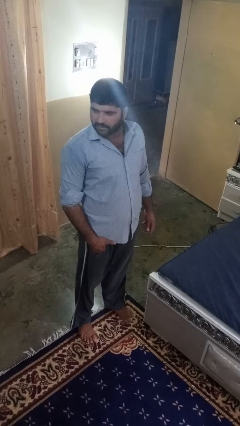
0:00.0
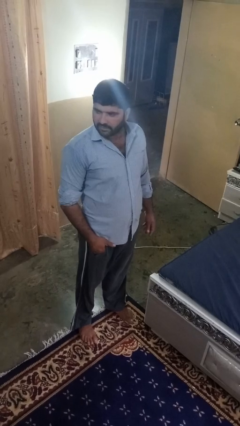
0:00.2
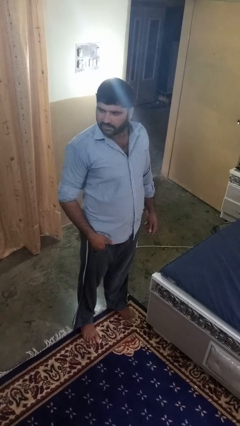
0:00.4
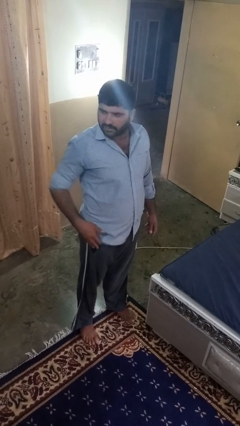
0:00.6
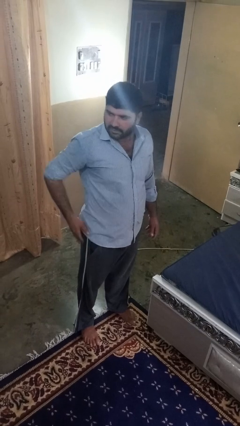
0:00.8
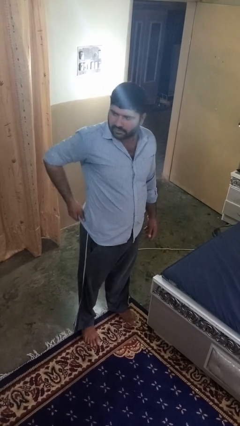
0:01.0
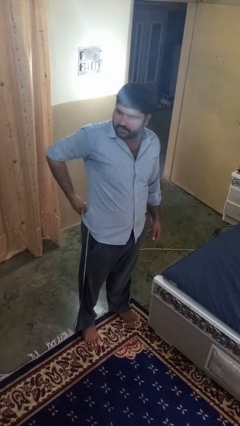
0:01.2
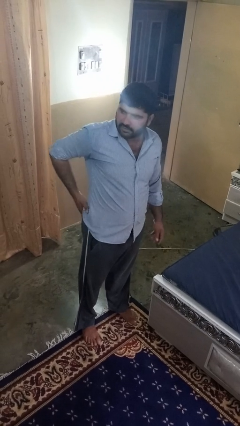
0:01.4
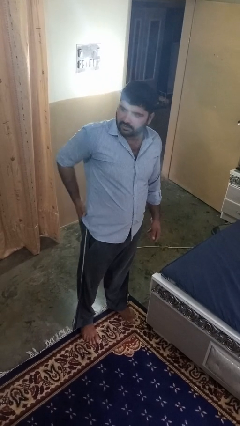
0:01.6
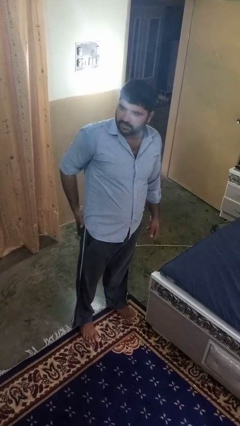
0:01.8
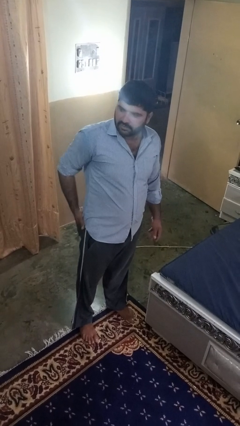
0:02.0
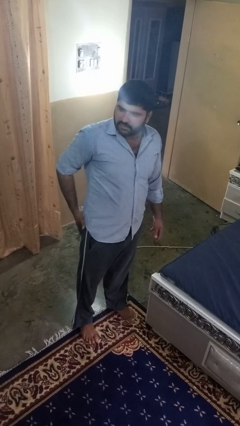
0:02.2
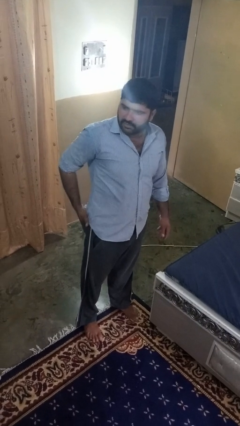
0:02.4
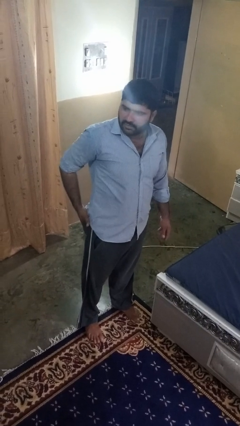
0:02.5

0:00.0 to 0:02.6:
person puts hands in back pockets

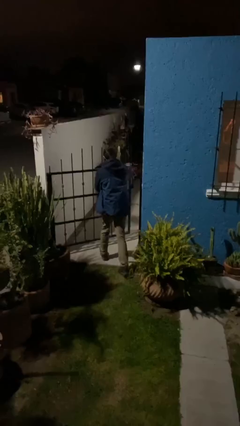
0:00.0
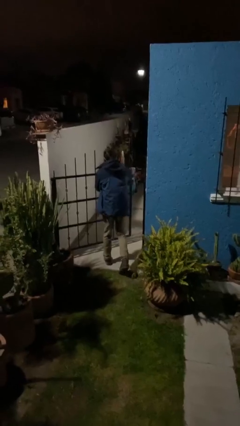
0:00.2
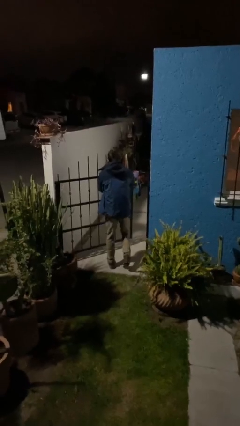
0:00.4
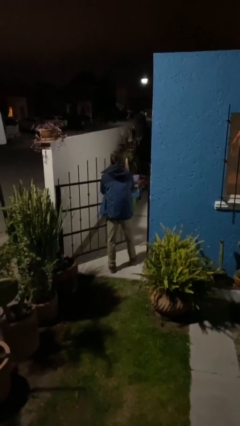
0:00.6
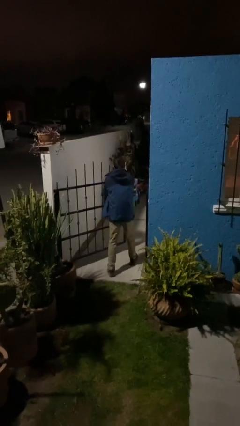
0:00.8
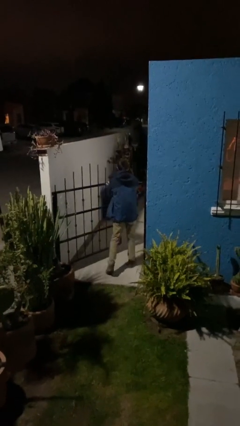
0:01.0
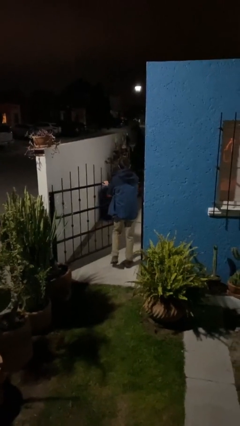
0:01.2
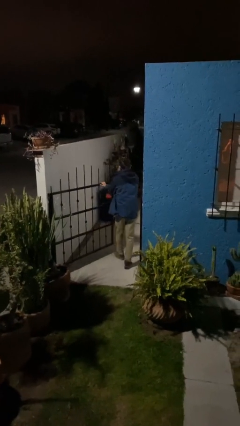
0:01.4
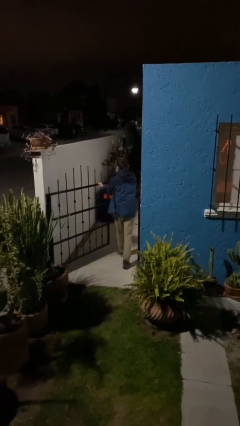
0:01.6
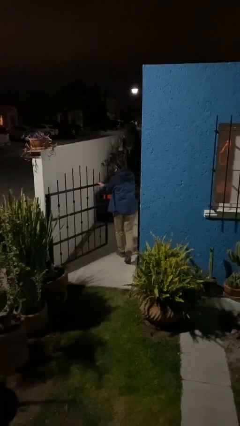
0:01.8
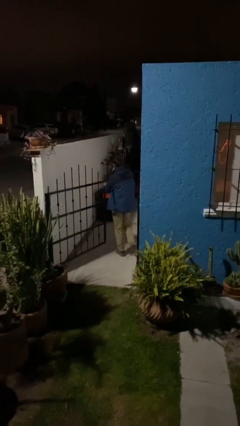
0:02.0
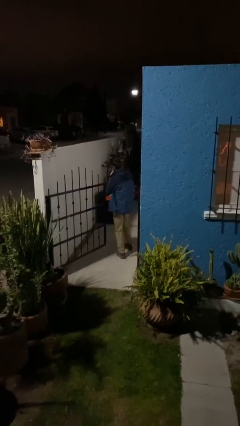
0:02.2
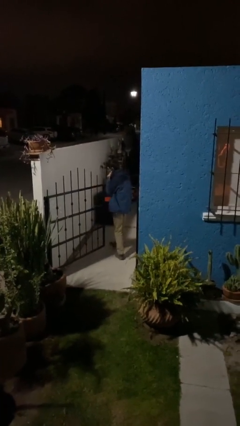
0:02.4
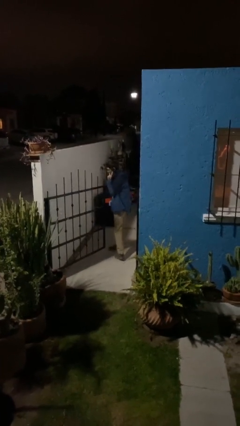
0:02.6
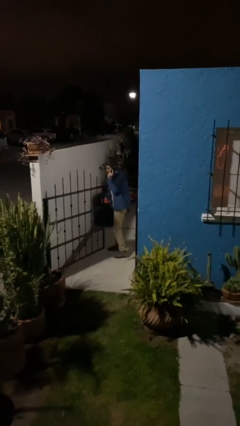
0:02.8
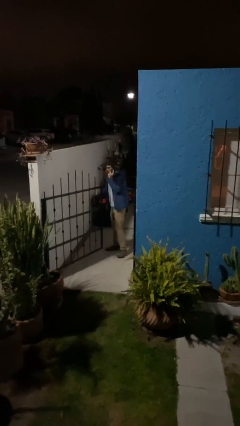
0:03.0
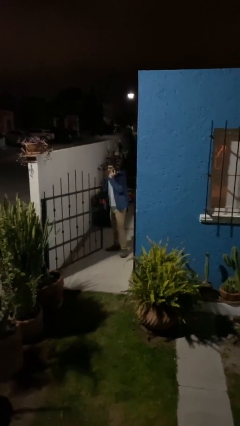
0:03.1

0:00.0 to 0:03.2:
person exits scene through structure

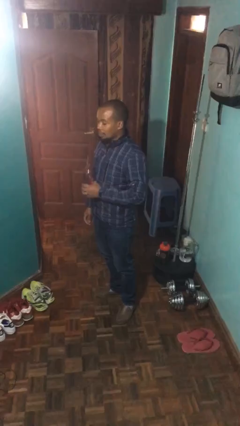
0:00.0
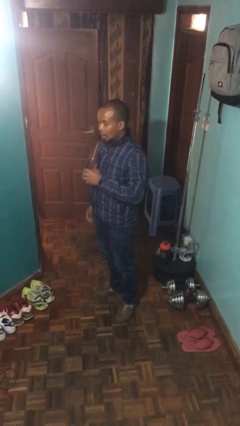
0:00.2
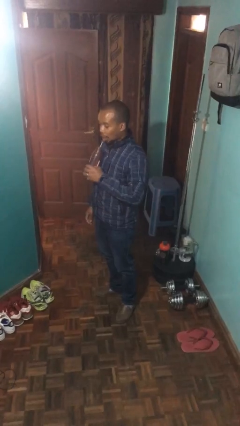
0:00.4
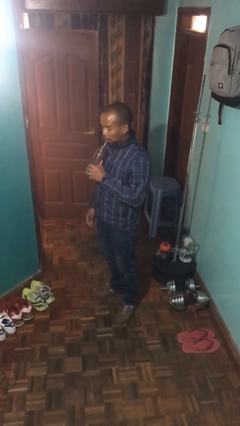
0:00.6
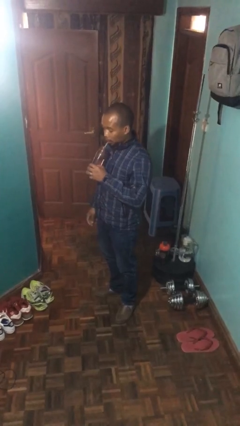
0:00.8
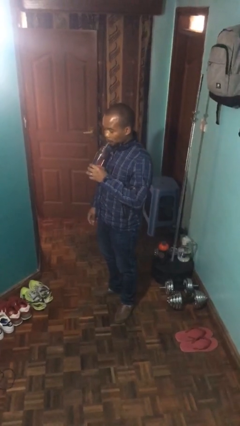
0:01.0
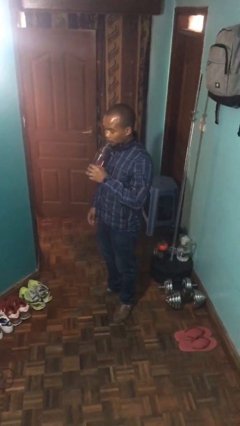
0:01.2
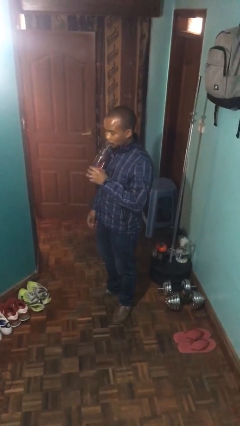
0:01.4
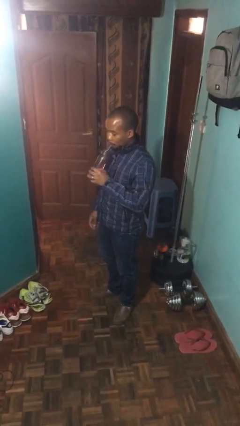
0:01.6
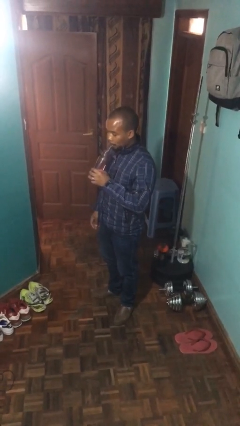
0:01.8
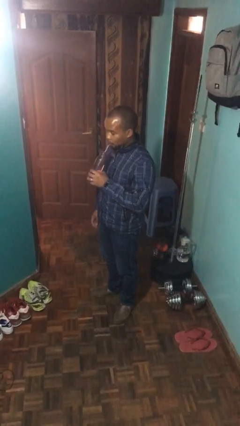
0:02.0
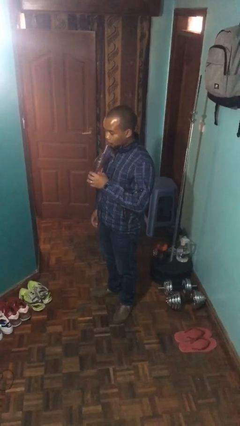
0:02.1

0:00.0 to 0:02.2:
person drinks from straw

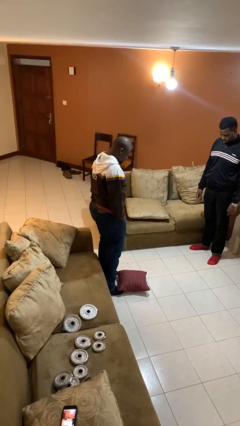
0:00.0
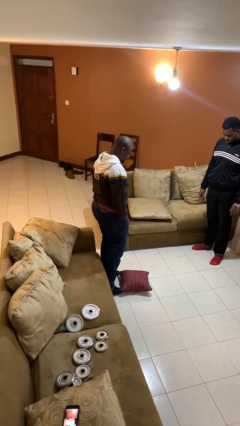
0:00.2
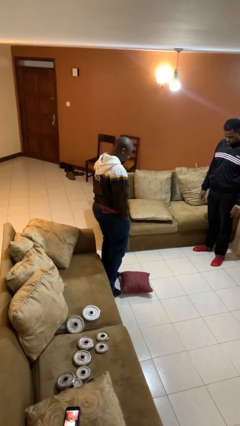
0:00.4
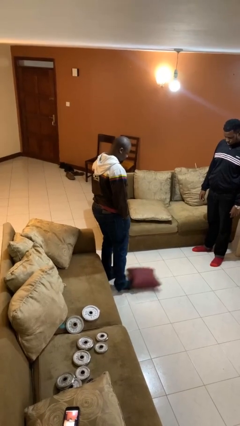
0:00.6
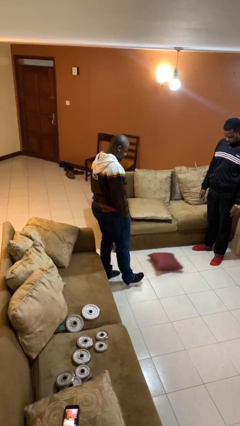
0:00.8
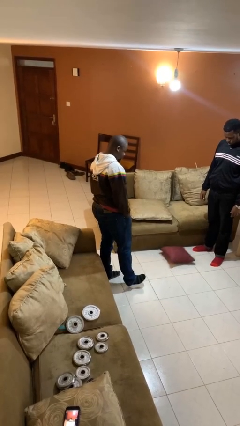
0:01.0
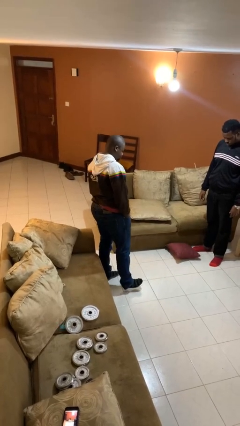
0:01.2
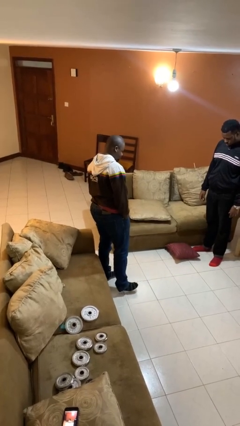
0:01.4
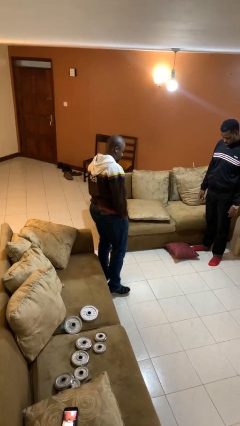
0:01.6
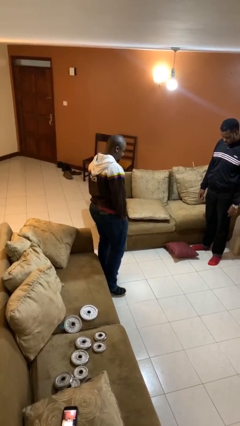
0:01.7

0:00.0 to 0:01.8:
person kicks object to person

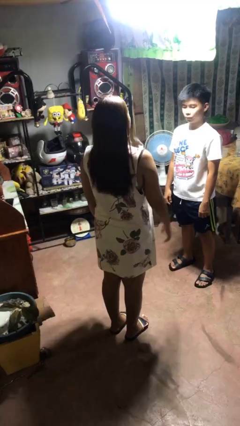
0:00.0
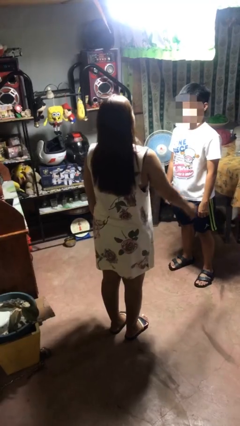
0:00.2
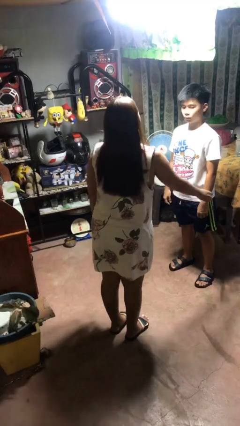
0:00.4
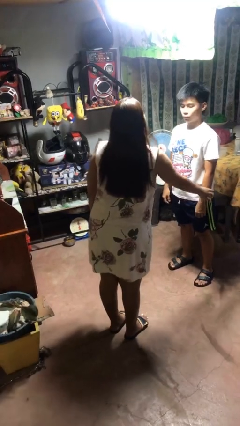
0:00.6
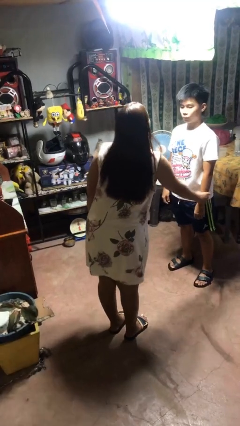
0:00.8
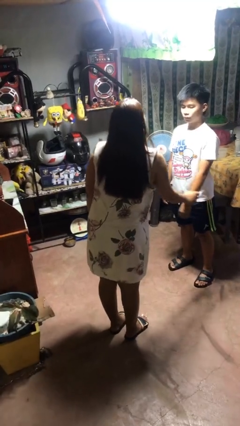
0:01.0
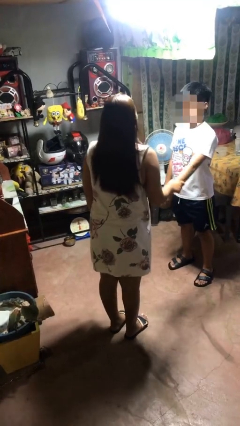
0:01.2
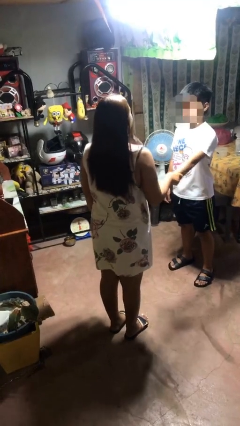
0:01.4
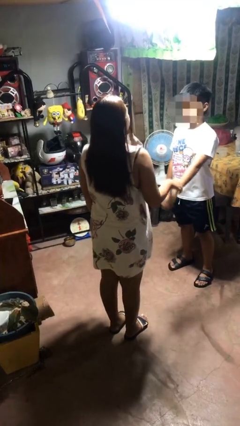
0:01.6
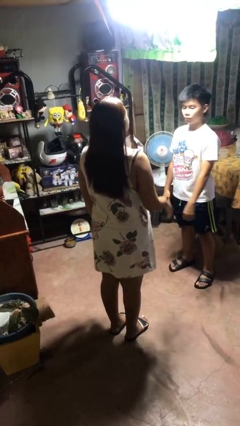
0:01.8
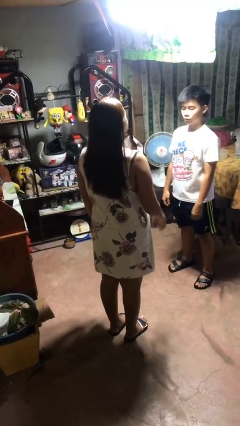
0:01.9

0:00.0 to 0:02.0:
person grabs person by forearm

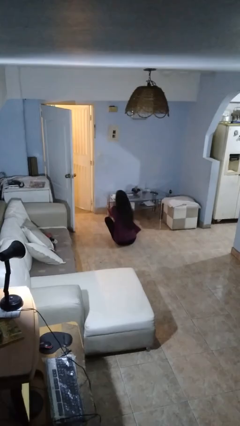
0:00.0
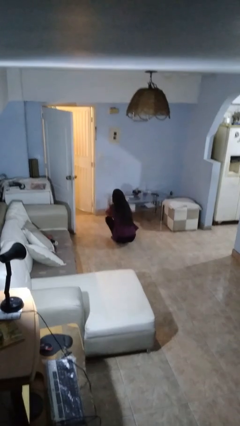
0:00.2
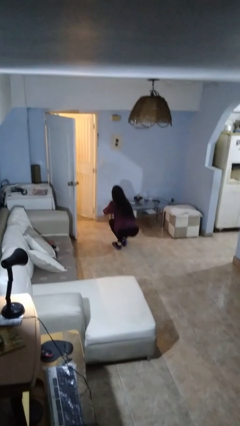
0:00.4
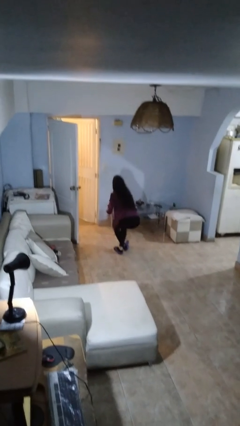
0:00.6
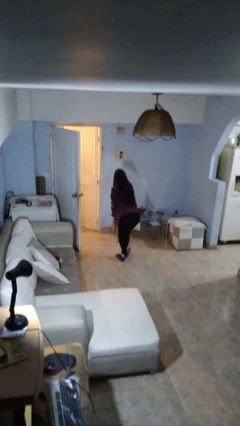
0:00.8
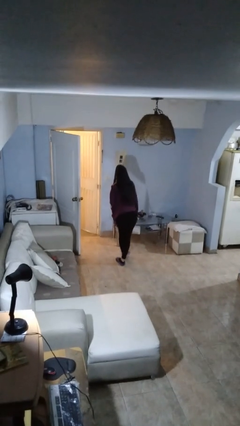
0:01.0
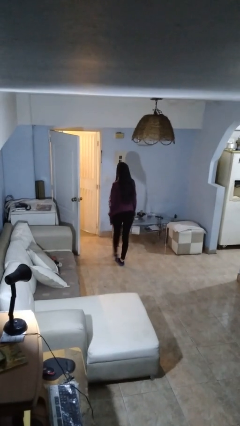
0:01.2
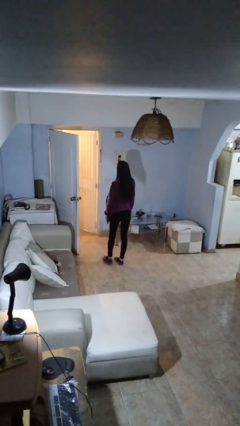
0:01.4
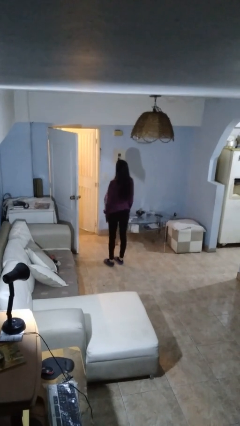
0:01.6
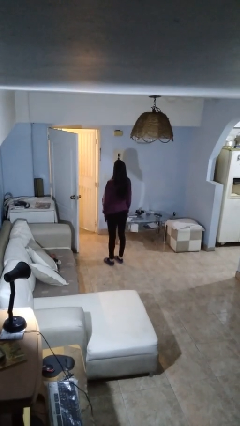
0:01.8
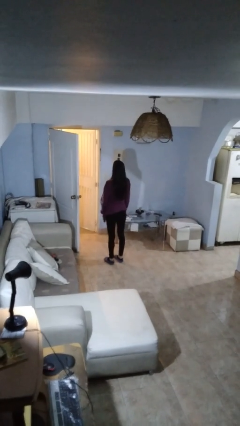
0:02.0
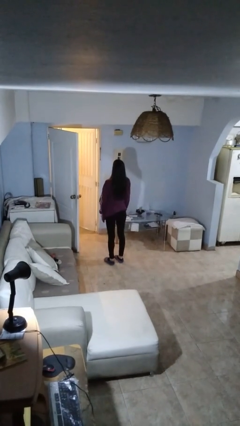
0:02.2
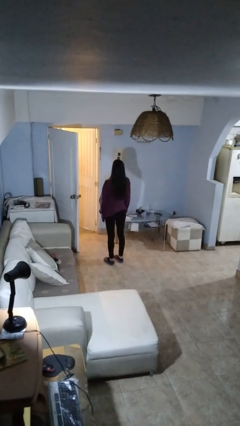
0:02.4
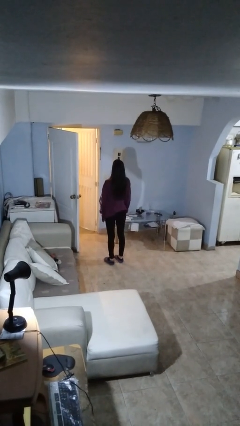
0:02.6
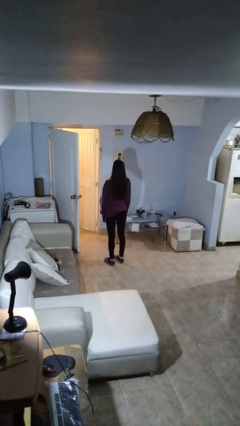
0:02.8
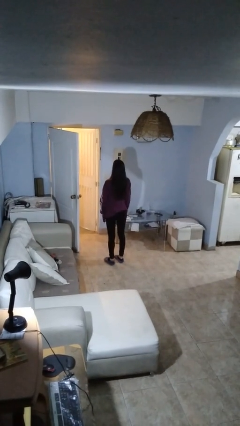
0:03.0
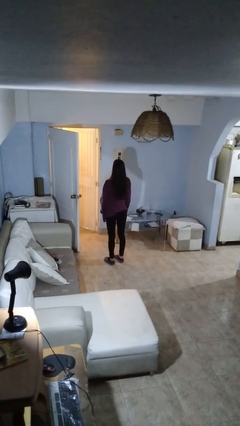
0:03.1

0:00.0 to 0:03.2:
person stands up from floor

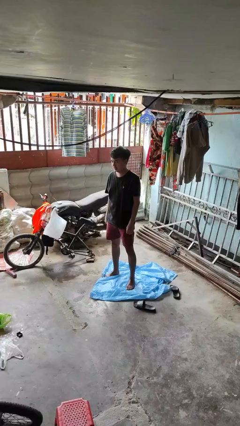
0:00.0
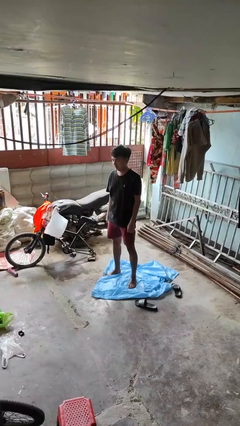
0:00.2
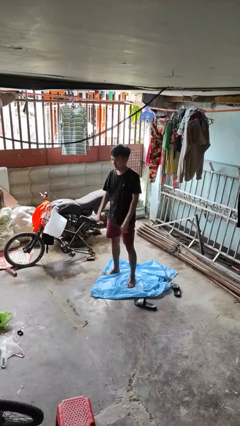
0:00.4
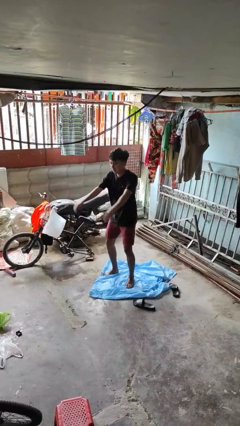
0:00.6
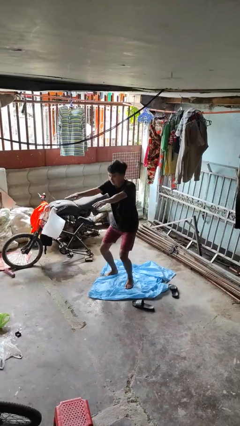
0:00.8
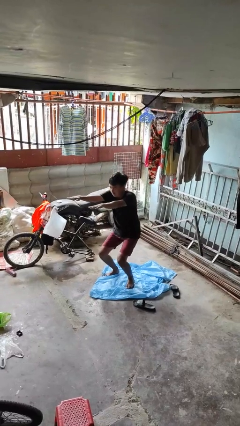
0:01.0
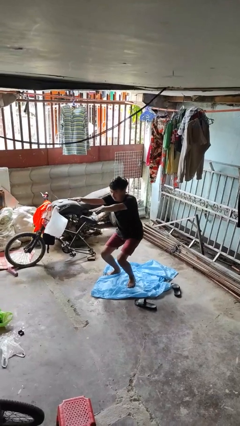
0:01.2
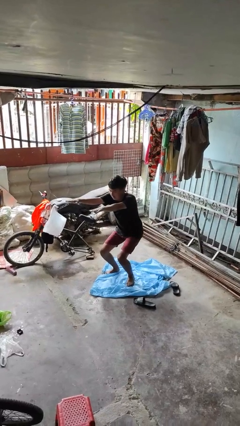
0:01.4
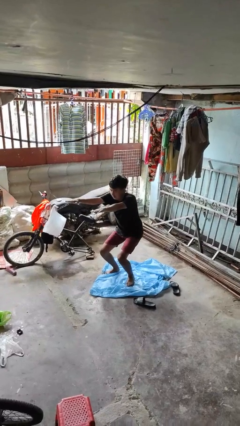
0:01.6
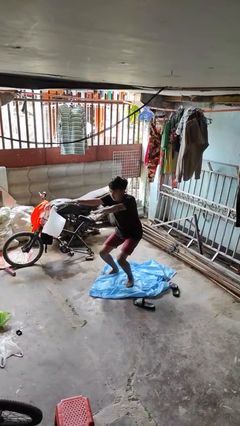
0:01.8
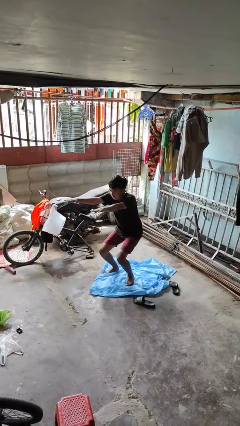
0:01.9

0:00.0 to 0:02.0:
person squats
